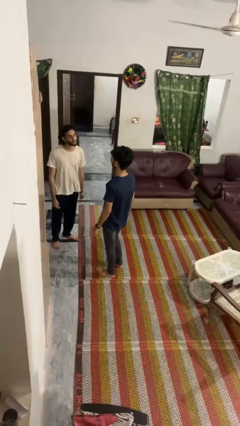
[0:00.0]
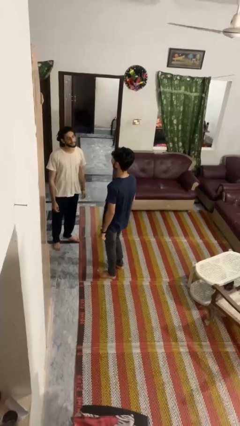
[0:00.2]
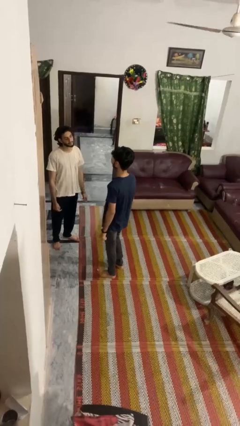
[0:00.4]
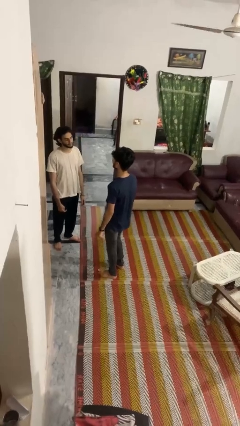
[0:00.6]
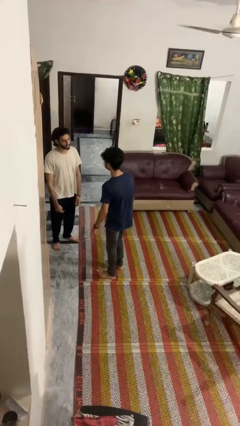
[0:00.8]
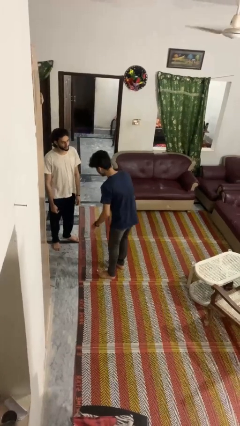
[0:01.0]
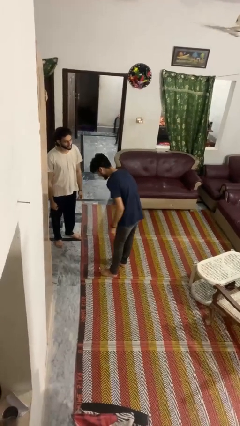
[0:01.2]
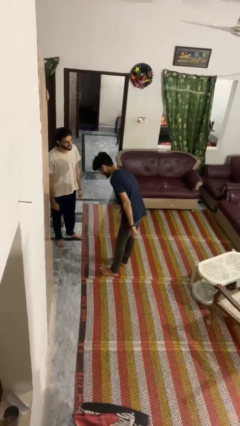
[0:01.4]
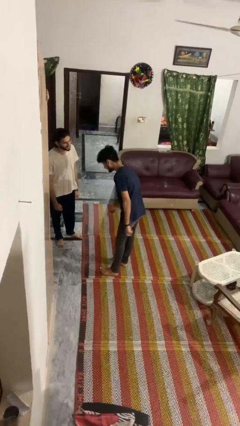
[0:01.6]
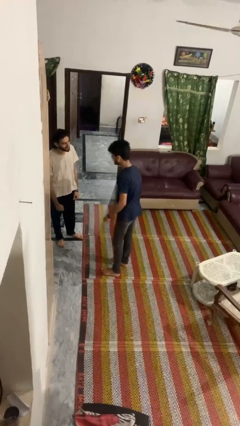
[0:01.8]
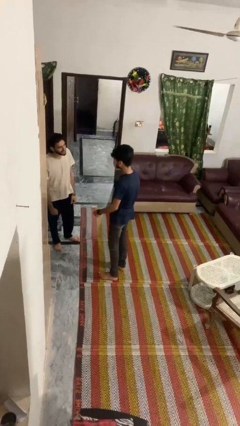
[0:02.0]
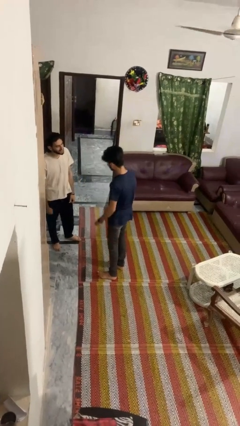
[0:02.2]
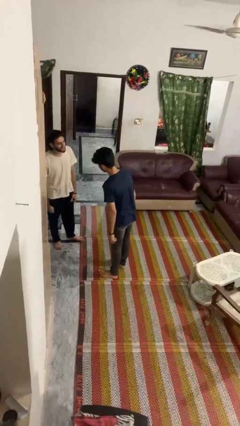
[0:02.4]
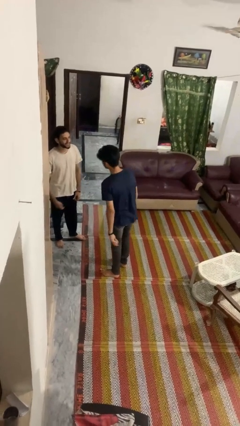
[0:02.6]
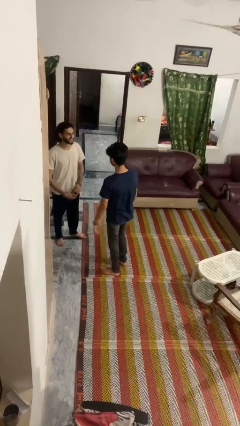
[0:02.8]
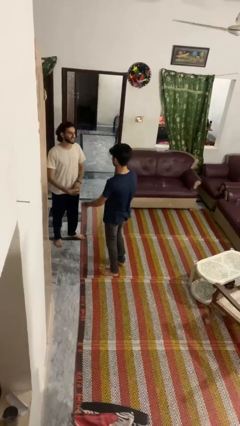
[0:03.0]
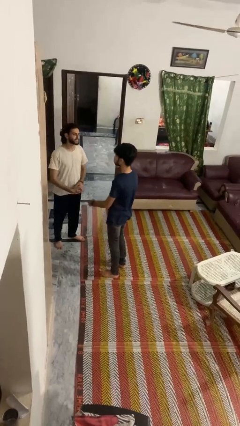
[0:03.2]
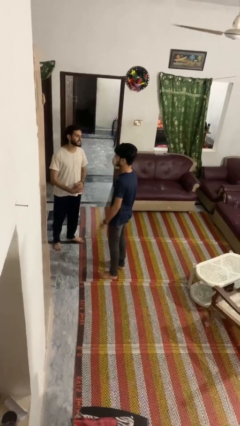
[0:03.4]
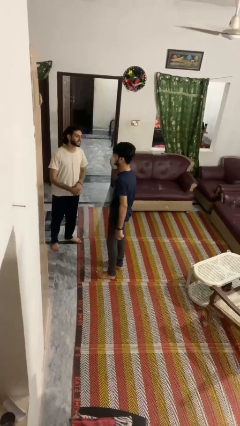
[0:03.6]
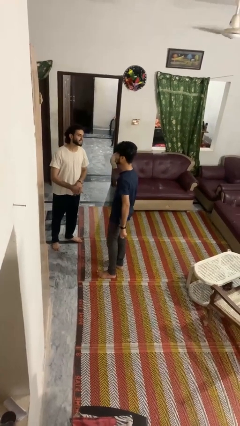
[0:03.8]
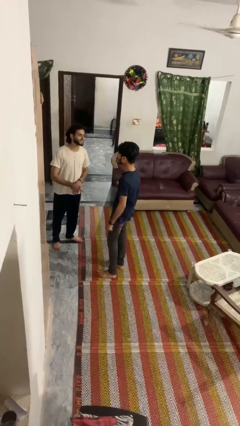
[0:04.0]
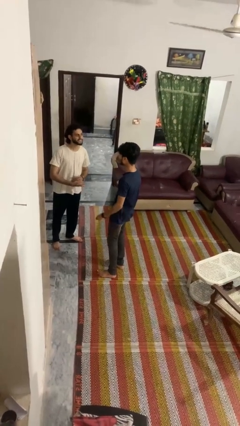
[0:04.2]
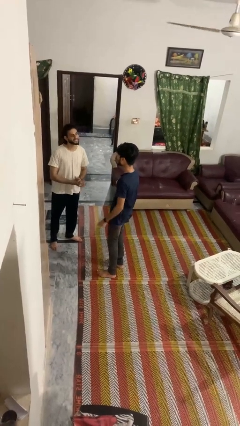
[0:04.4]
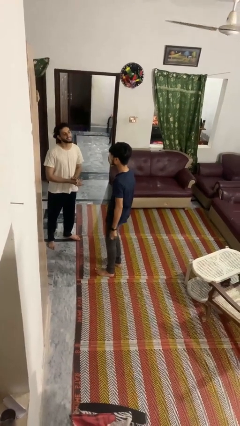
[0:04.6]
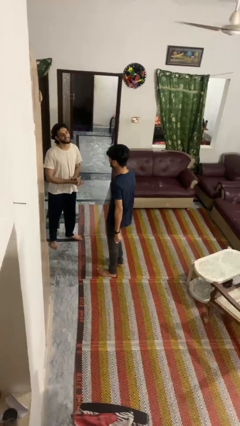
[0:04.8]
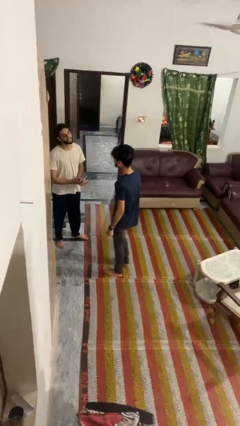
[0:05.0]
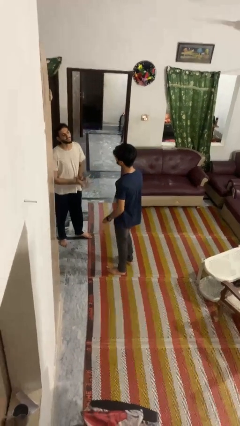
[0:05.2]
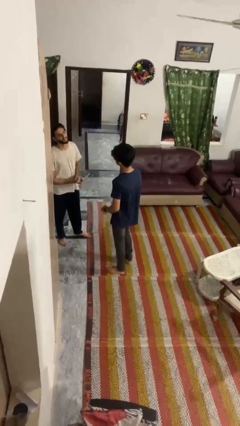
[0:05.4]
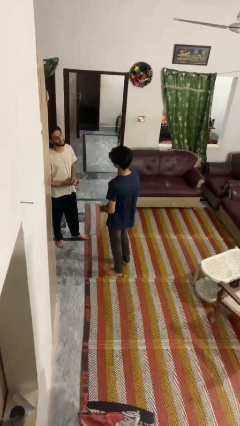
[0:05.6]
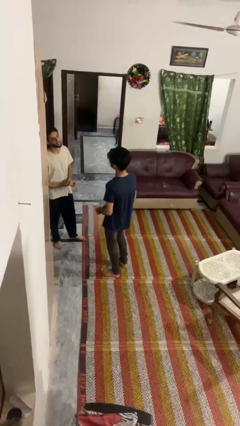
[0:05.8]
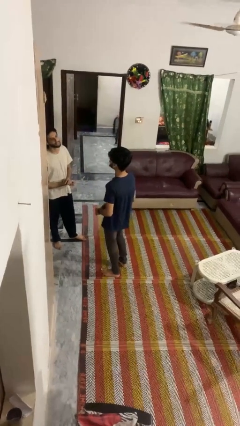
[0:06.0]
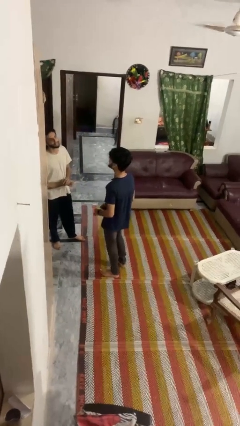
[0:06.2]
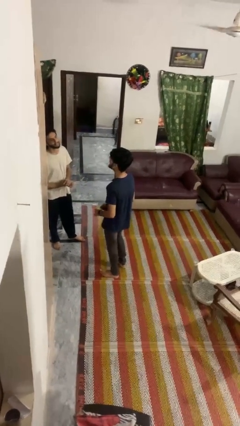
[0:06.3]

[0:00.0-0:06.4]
person laughs with person

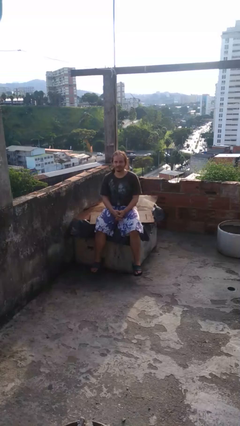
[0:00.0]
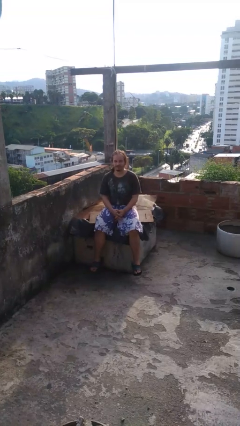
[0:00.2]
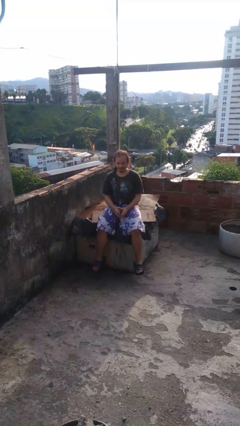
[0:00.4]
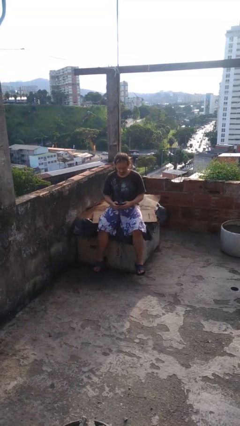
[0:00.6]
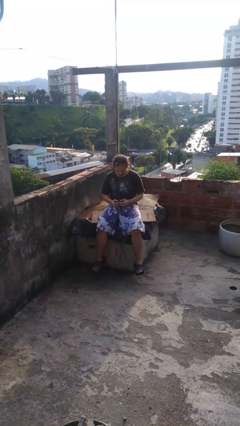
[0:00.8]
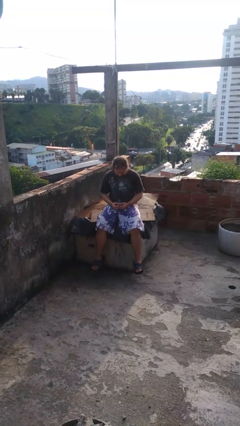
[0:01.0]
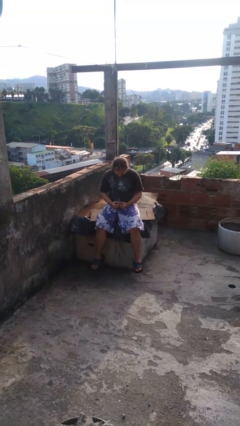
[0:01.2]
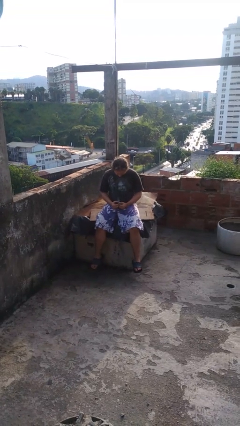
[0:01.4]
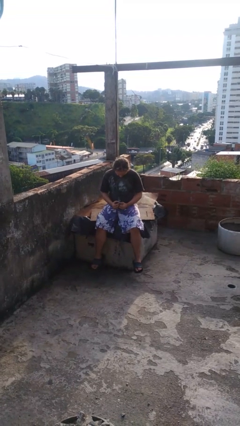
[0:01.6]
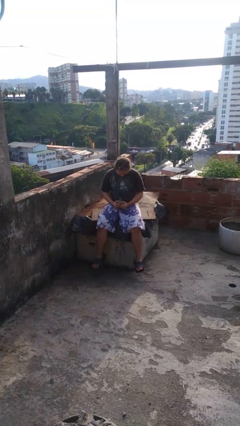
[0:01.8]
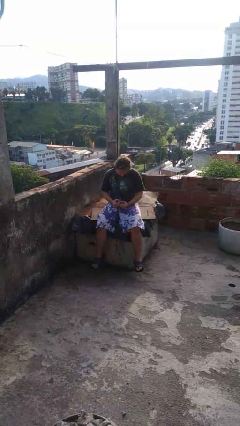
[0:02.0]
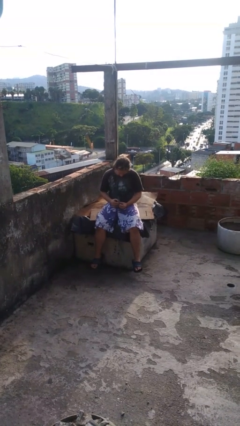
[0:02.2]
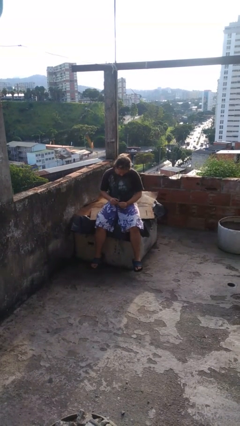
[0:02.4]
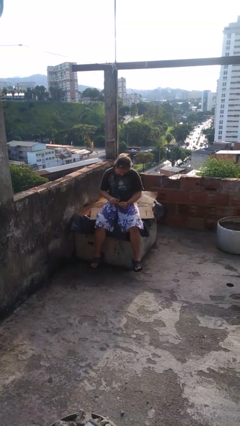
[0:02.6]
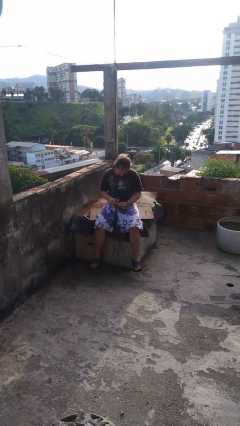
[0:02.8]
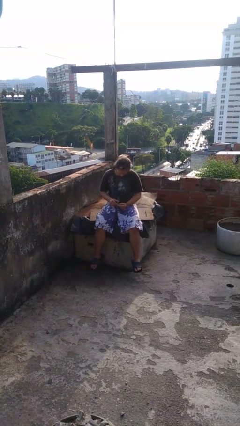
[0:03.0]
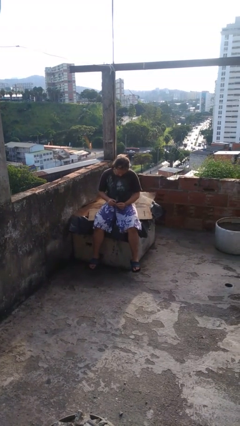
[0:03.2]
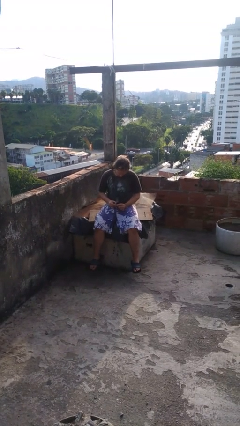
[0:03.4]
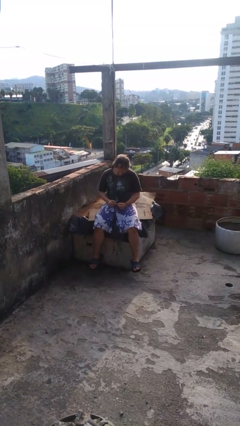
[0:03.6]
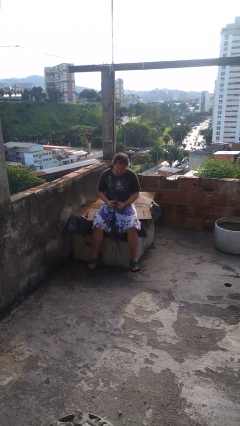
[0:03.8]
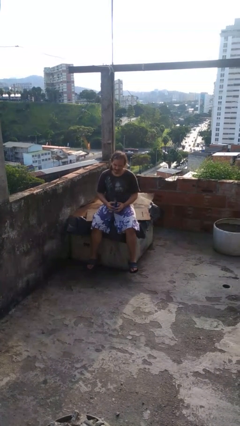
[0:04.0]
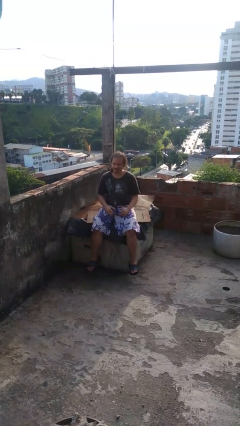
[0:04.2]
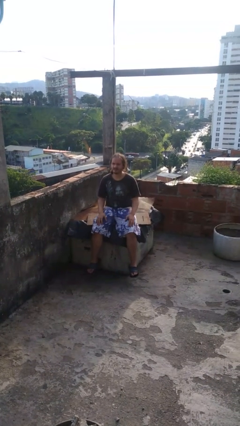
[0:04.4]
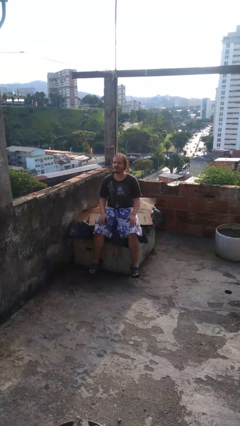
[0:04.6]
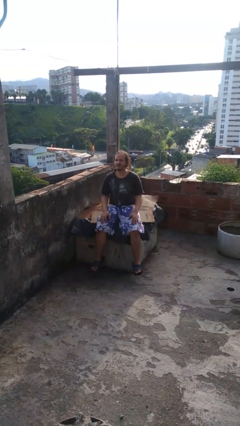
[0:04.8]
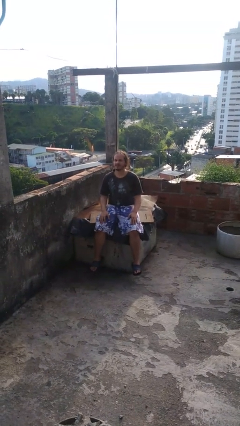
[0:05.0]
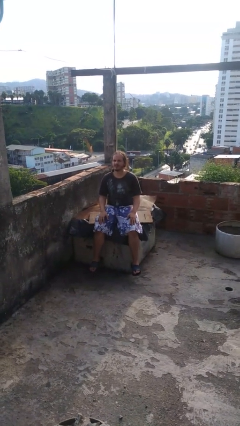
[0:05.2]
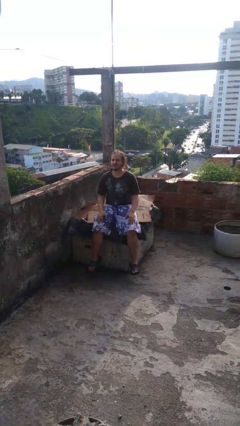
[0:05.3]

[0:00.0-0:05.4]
person looks at hands in lap

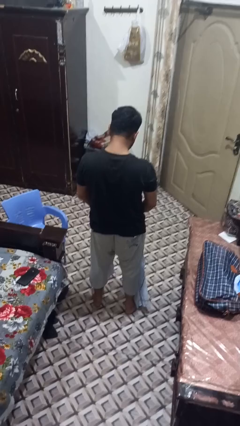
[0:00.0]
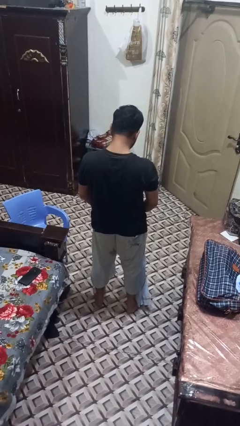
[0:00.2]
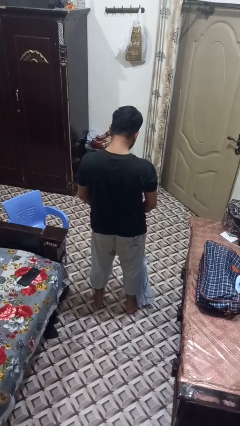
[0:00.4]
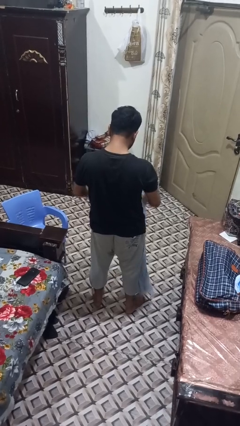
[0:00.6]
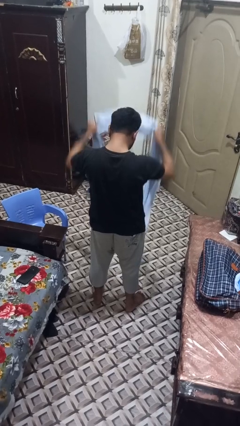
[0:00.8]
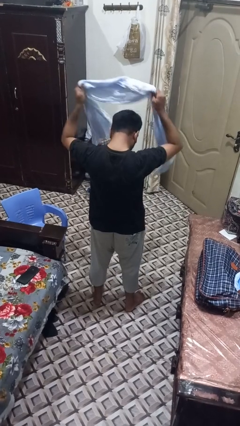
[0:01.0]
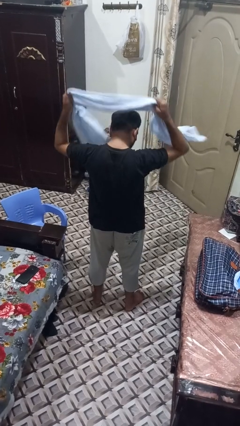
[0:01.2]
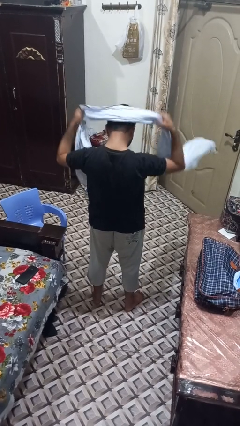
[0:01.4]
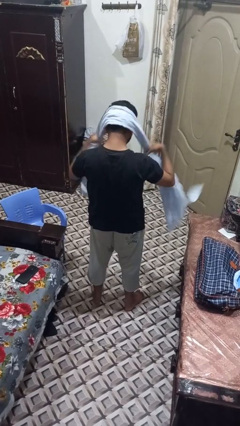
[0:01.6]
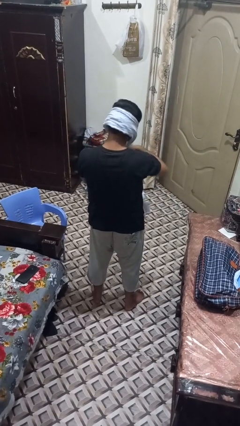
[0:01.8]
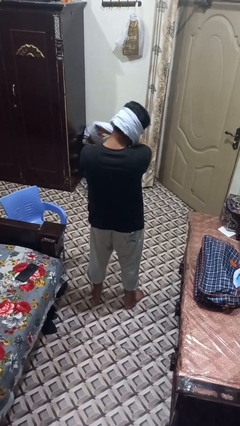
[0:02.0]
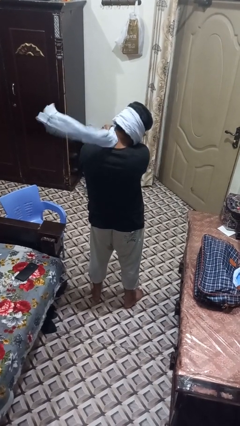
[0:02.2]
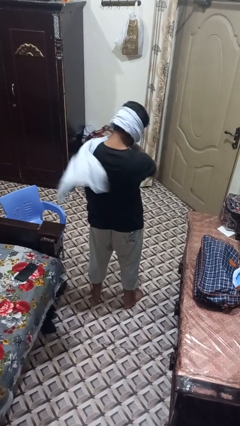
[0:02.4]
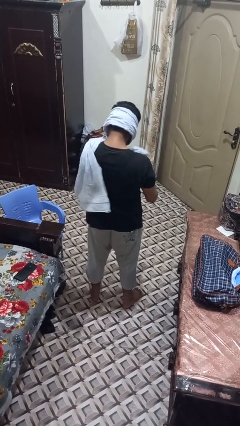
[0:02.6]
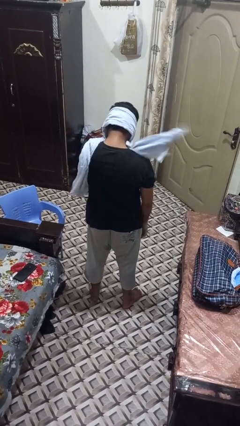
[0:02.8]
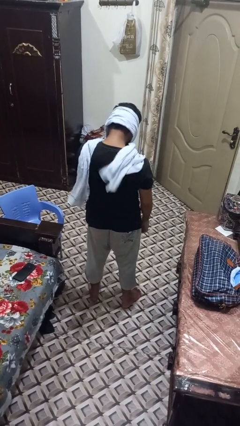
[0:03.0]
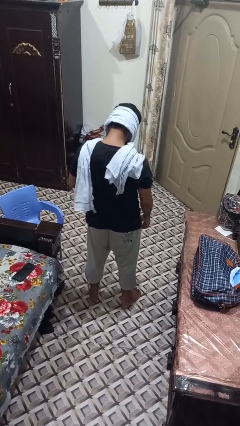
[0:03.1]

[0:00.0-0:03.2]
person puts on scarf

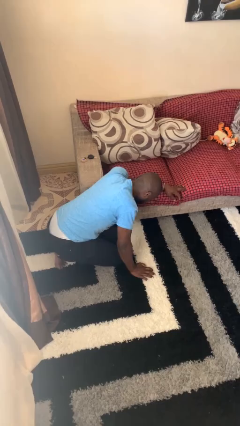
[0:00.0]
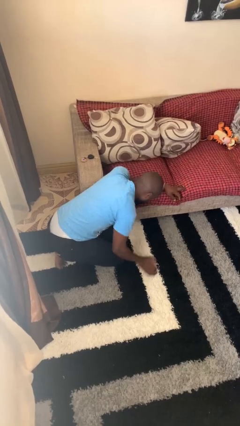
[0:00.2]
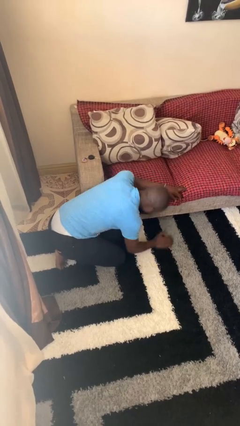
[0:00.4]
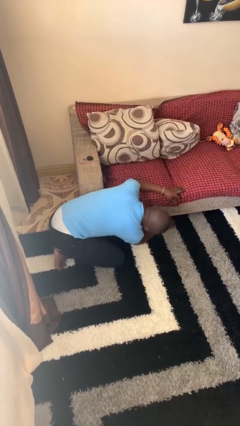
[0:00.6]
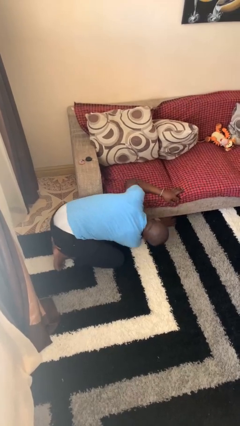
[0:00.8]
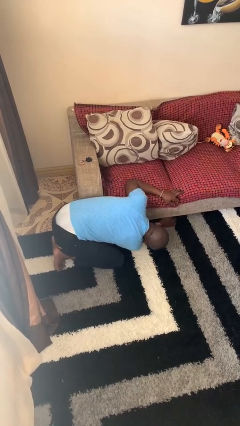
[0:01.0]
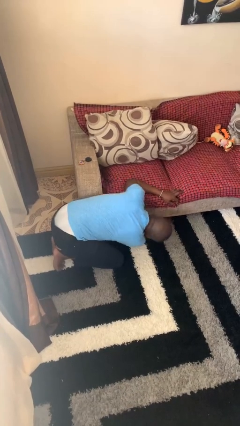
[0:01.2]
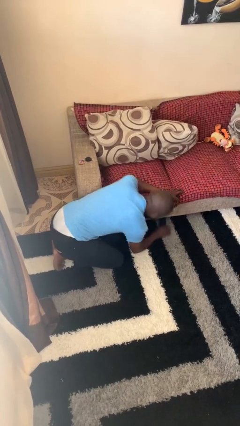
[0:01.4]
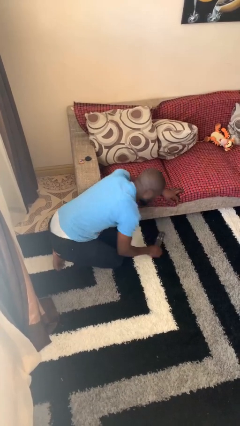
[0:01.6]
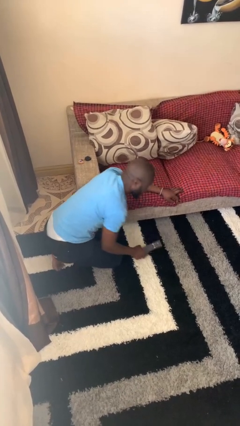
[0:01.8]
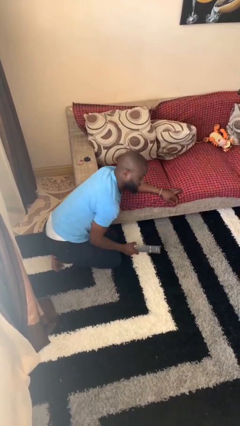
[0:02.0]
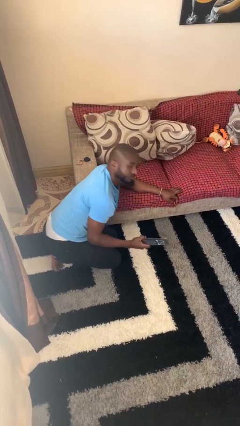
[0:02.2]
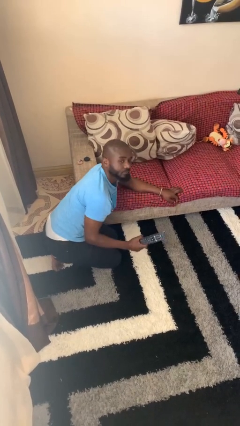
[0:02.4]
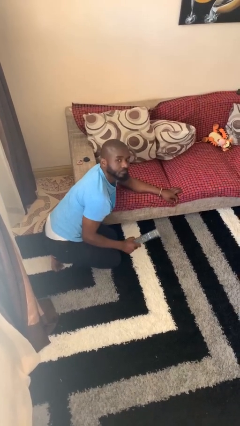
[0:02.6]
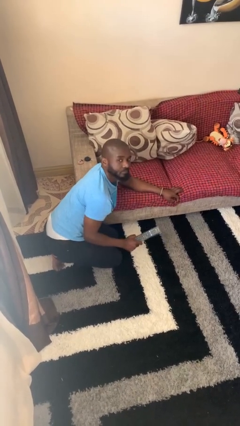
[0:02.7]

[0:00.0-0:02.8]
person searches under couch

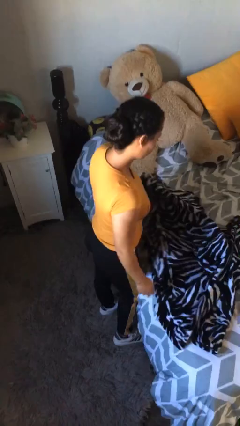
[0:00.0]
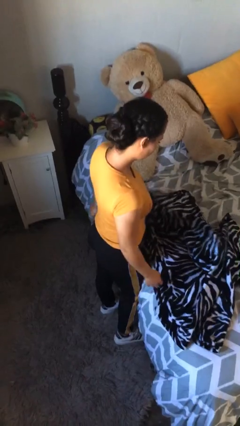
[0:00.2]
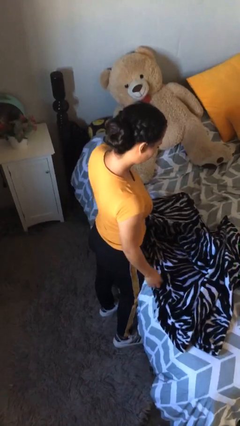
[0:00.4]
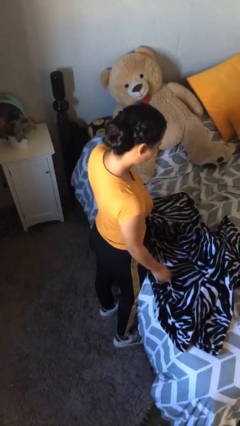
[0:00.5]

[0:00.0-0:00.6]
person unfolds blanket
